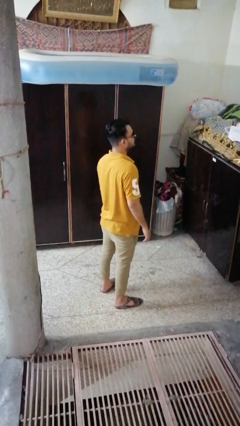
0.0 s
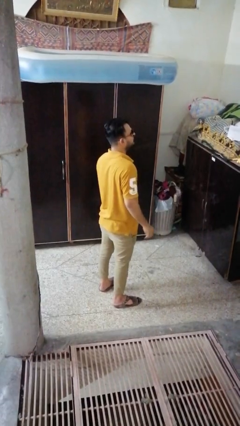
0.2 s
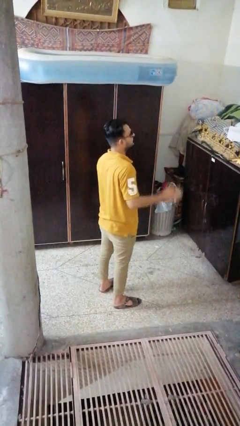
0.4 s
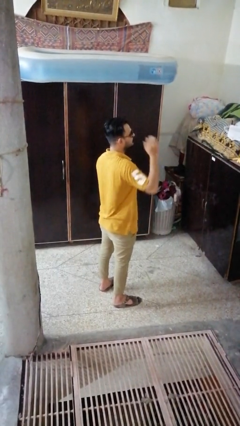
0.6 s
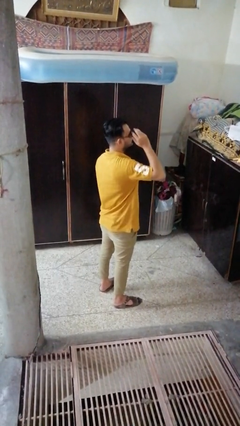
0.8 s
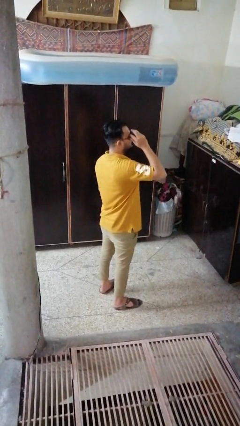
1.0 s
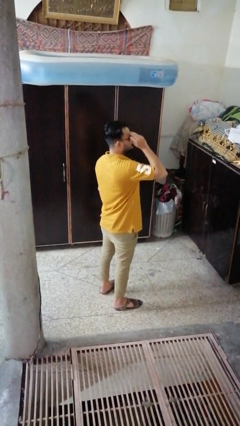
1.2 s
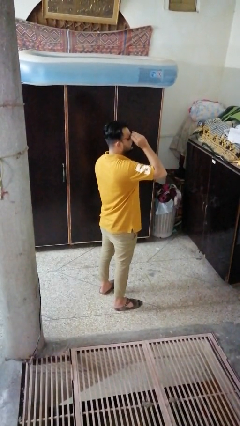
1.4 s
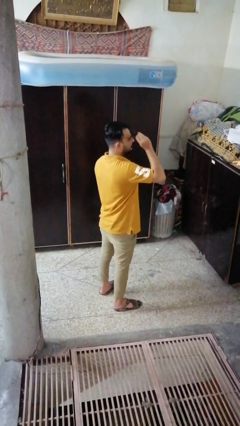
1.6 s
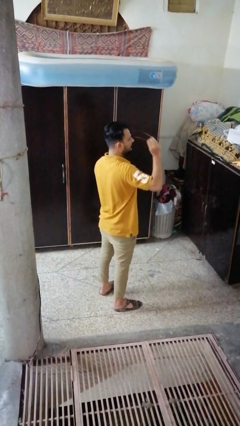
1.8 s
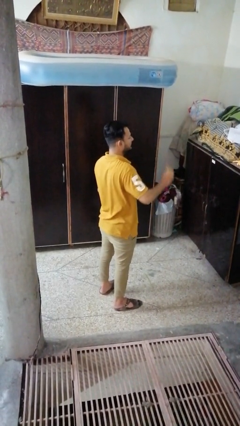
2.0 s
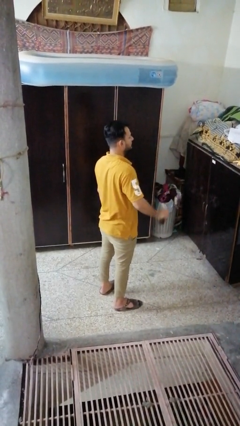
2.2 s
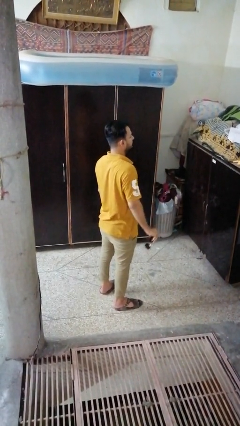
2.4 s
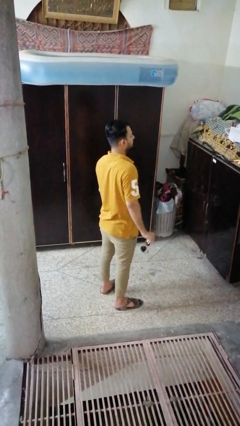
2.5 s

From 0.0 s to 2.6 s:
person takes off sunglasses

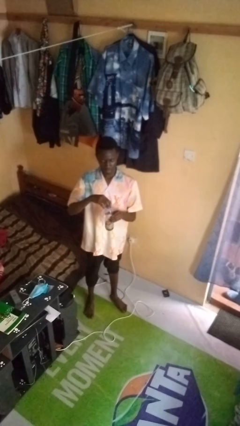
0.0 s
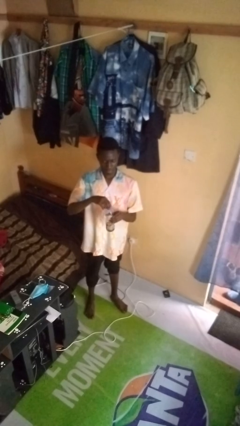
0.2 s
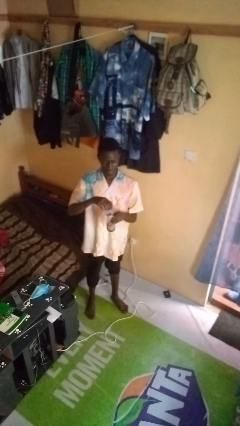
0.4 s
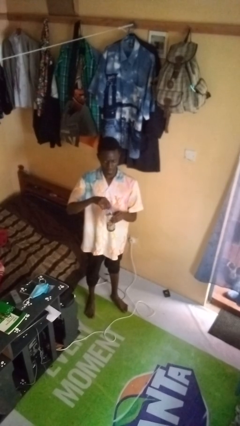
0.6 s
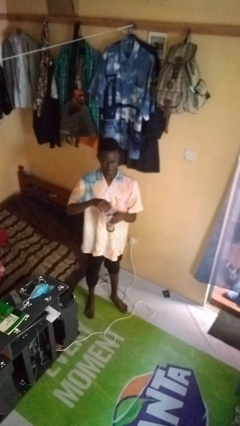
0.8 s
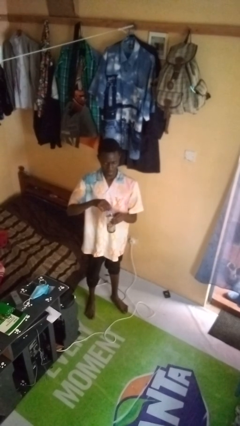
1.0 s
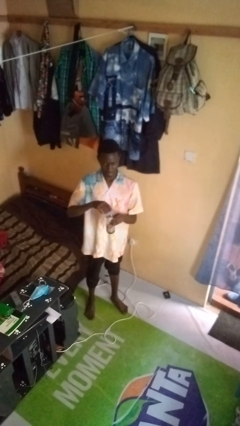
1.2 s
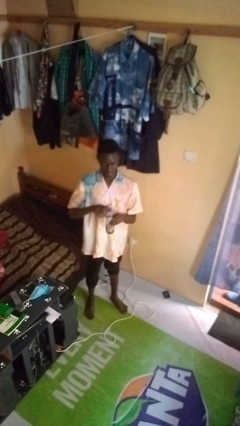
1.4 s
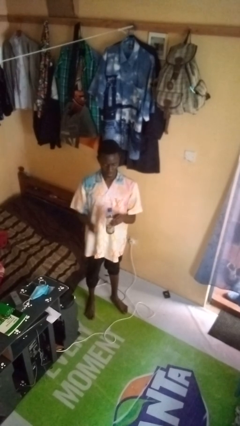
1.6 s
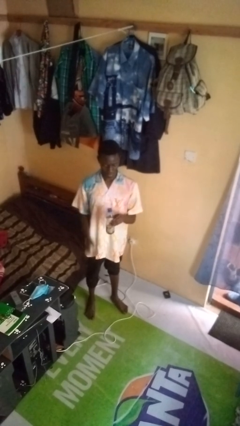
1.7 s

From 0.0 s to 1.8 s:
person screws lid to bottle

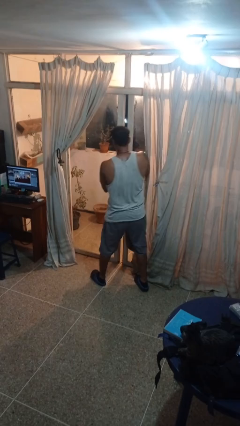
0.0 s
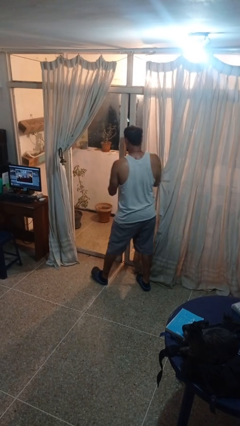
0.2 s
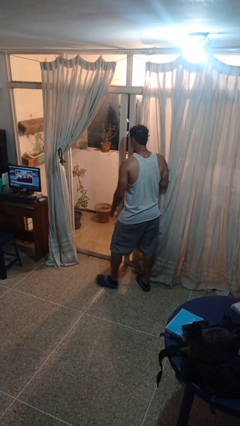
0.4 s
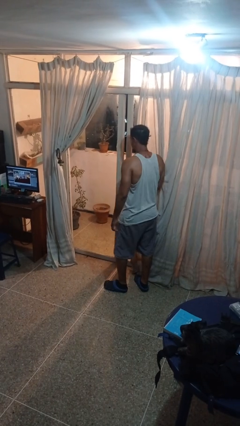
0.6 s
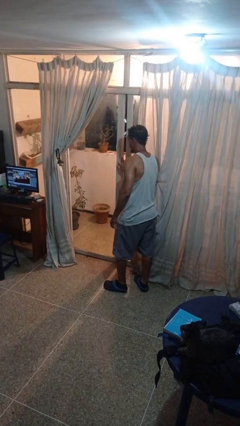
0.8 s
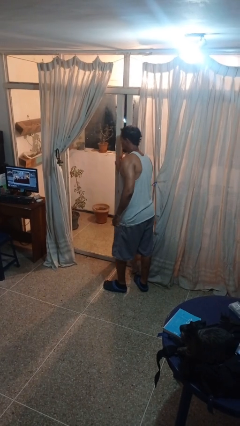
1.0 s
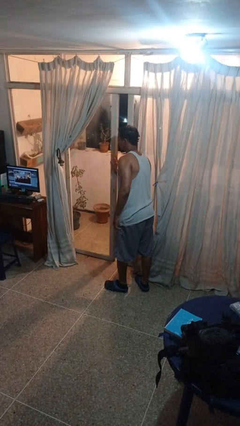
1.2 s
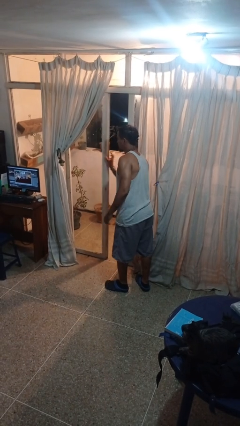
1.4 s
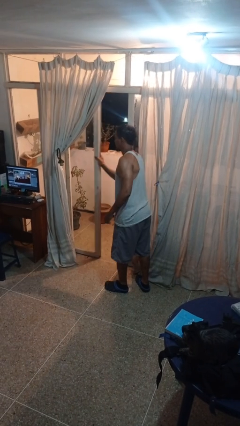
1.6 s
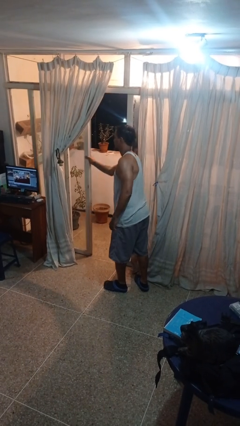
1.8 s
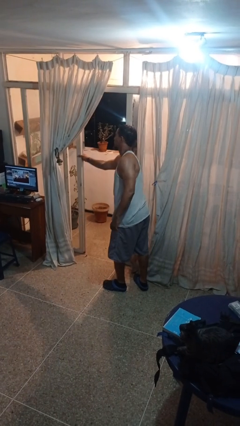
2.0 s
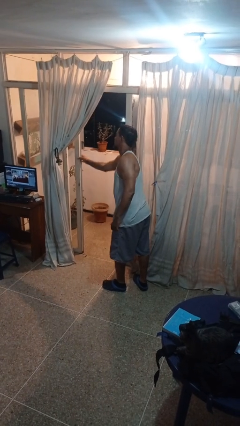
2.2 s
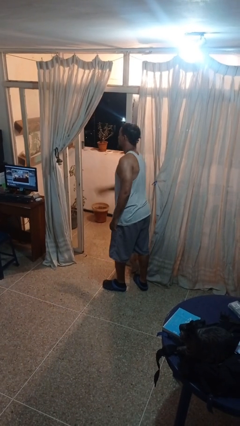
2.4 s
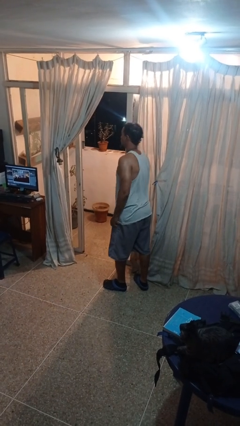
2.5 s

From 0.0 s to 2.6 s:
person opens sliding door

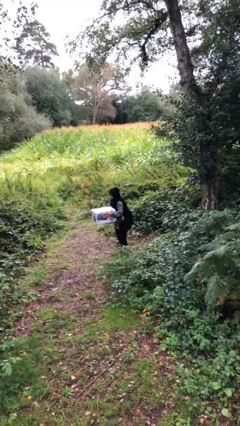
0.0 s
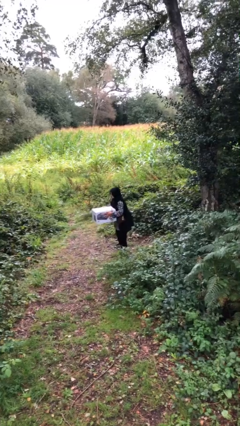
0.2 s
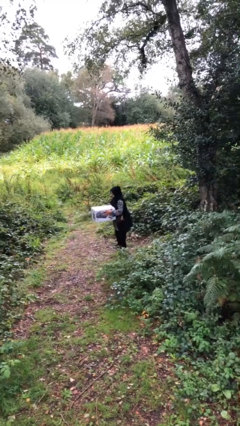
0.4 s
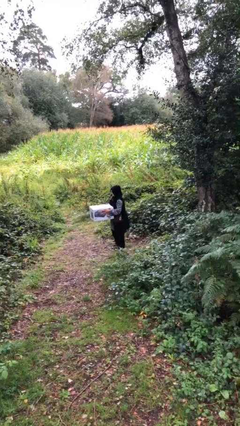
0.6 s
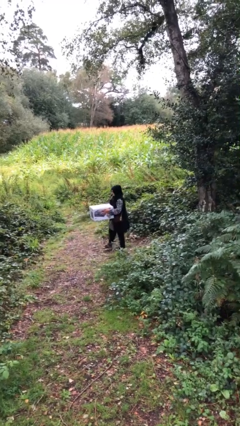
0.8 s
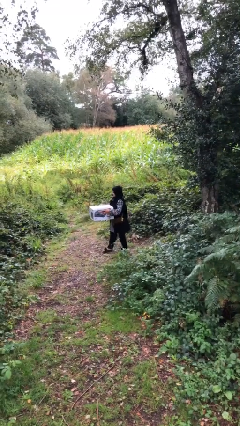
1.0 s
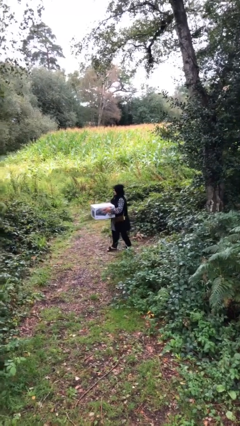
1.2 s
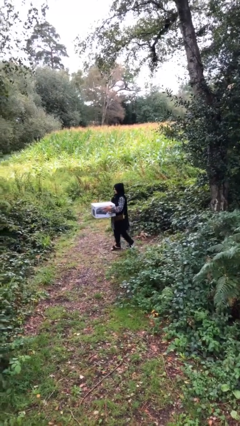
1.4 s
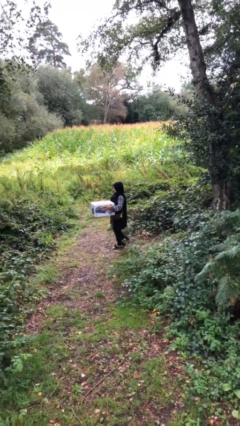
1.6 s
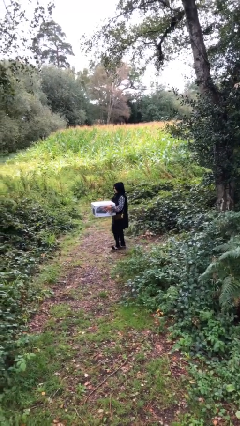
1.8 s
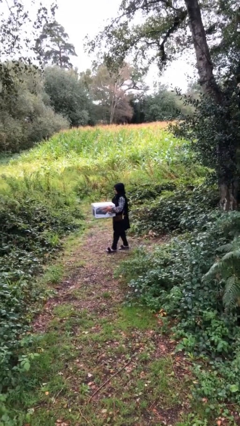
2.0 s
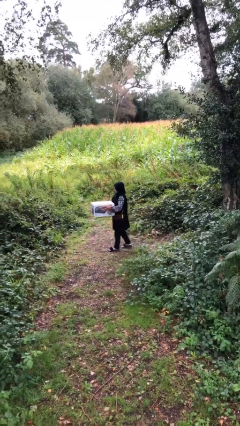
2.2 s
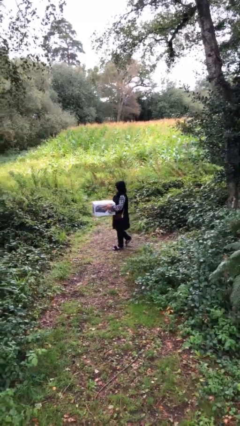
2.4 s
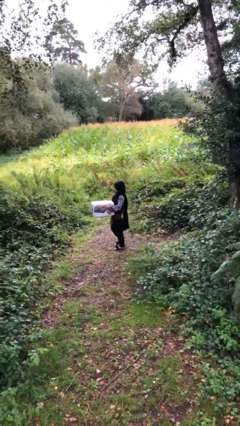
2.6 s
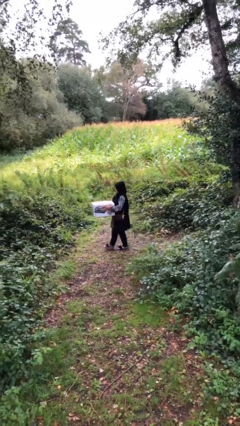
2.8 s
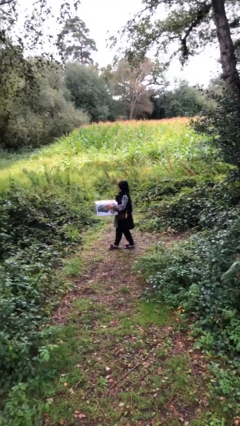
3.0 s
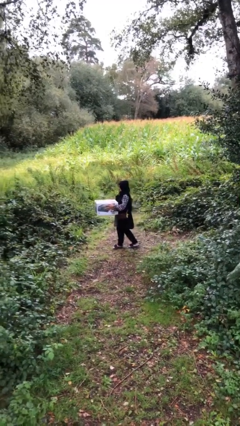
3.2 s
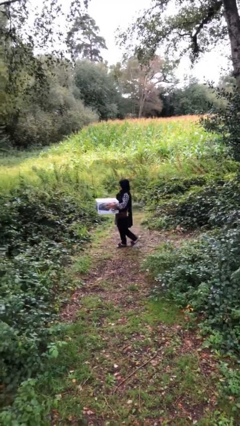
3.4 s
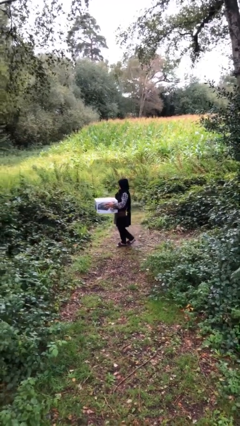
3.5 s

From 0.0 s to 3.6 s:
person carries heavy object

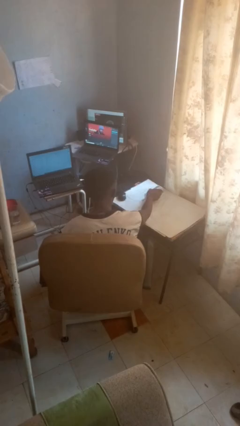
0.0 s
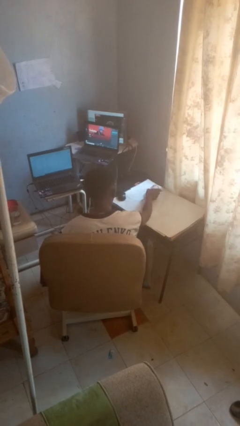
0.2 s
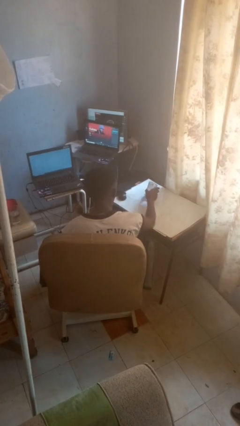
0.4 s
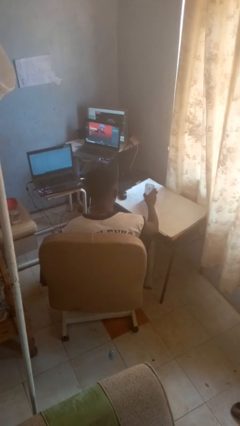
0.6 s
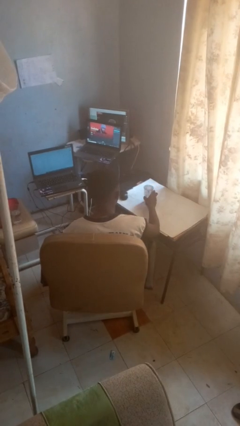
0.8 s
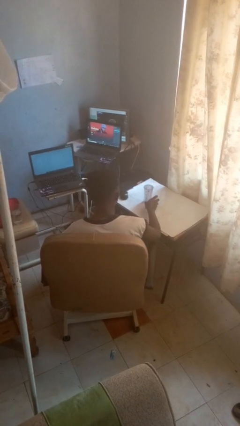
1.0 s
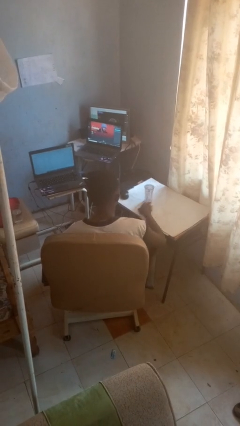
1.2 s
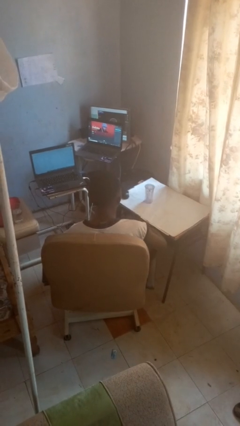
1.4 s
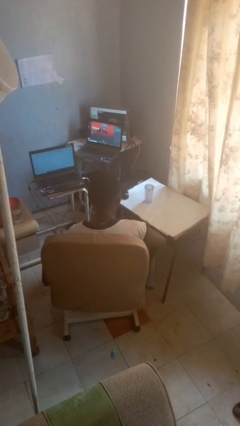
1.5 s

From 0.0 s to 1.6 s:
person sets upright glass

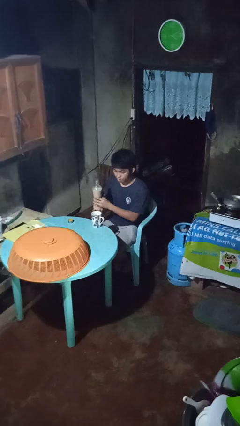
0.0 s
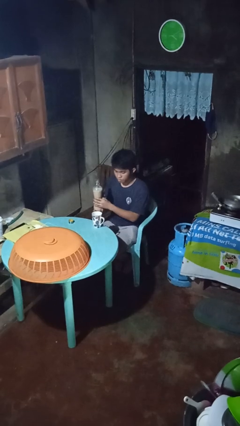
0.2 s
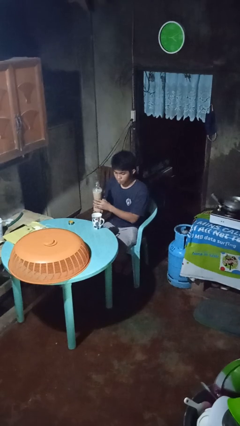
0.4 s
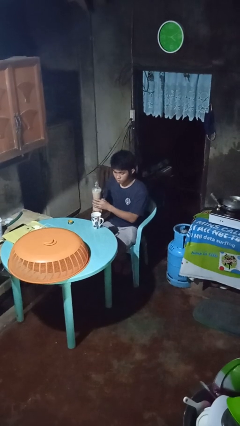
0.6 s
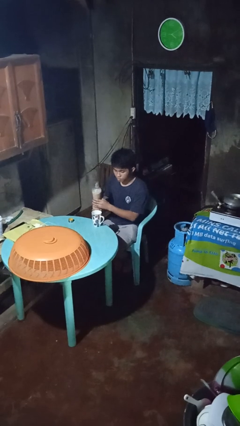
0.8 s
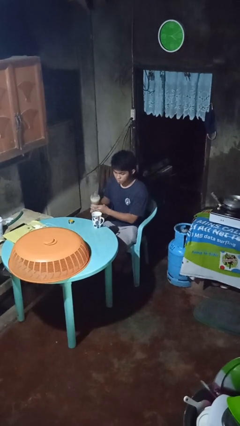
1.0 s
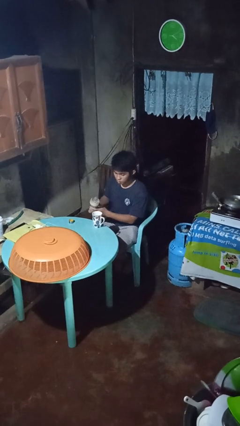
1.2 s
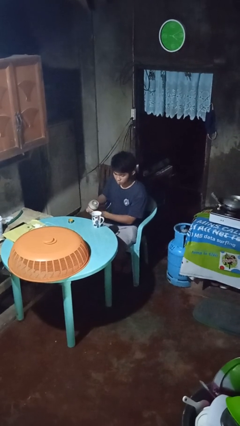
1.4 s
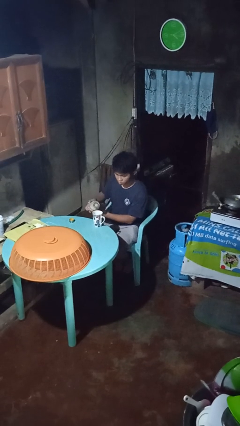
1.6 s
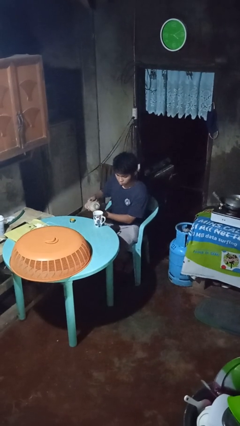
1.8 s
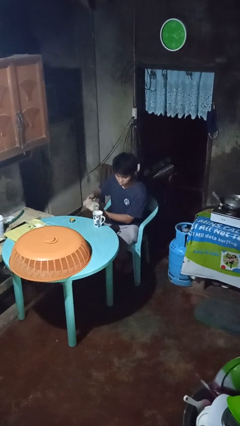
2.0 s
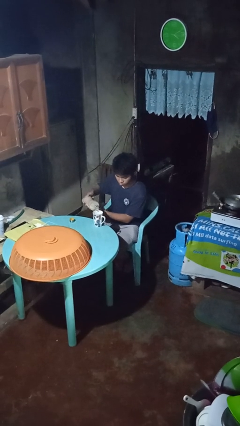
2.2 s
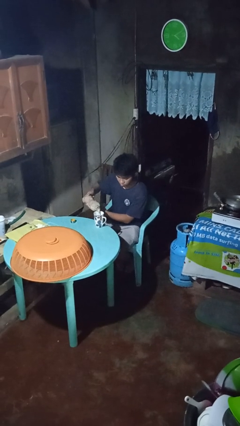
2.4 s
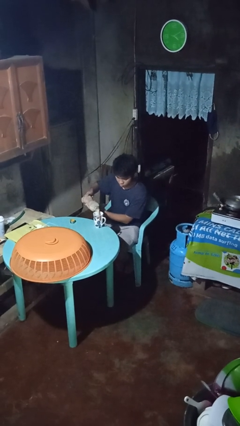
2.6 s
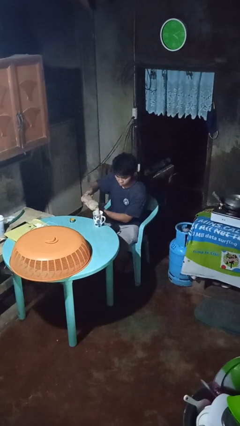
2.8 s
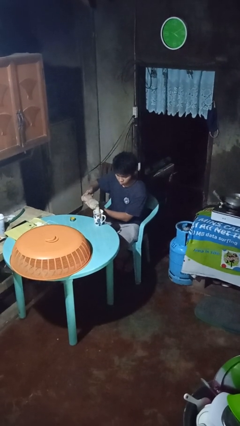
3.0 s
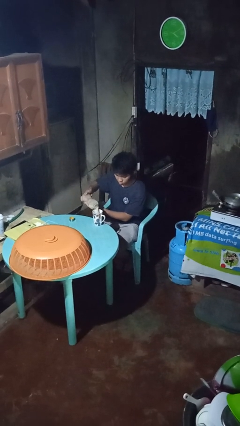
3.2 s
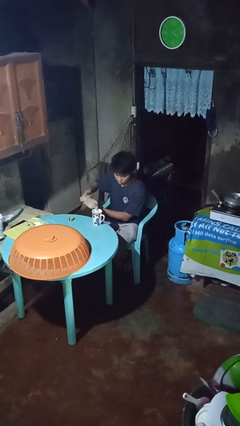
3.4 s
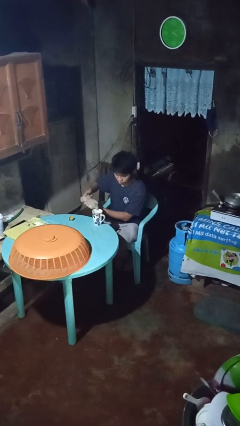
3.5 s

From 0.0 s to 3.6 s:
person pours coffee into mug

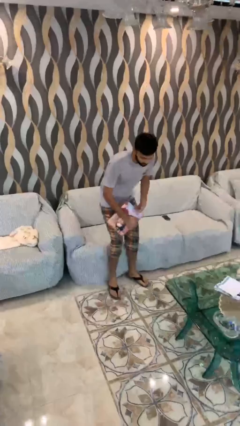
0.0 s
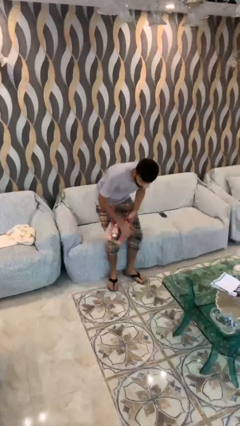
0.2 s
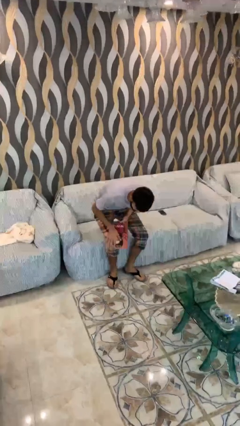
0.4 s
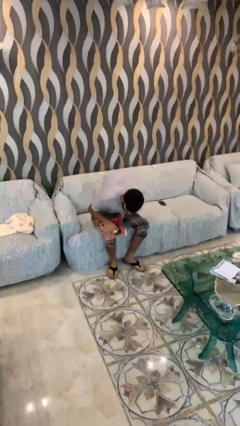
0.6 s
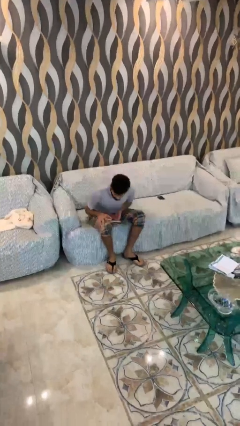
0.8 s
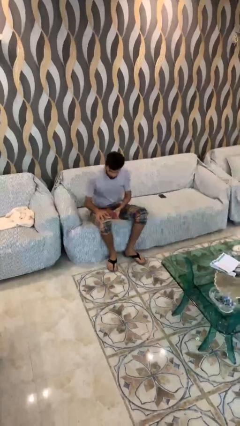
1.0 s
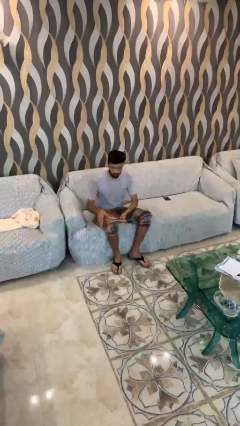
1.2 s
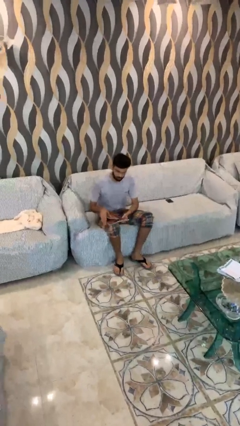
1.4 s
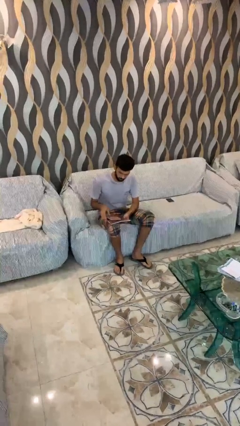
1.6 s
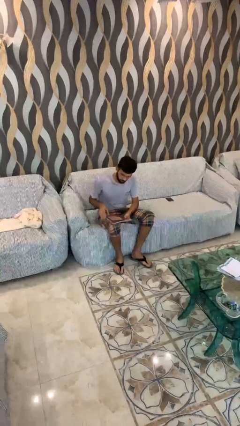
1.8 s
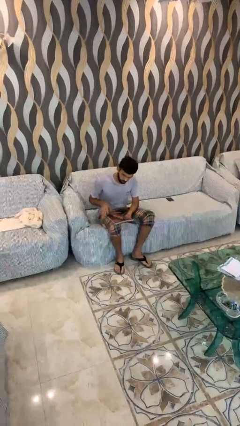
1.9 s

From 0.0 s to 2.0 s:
person sits down
